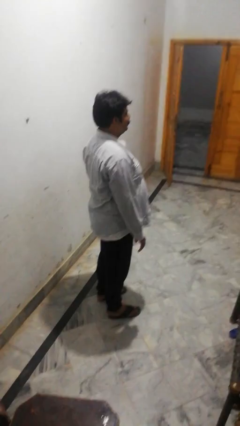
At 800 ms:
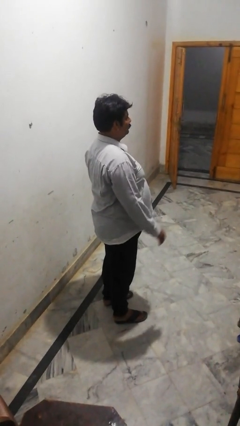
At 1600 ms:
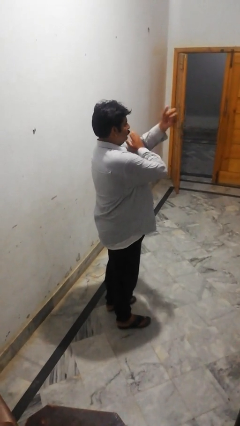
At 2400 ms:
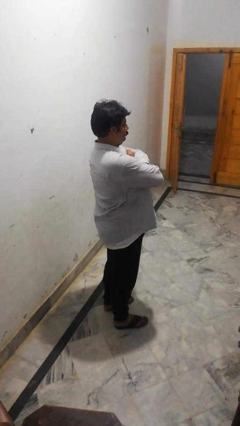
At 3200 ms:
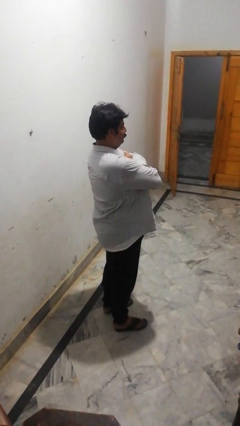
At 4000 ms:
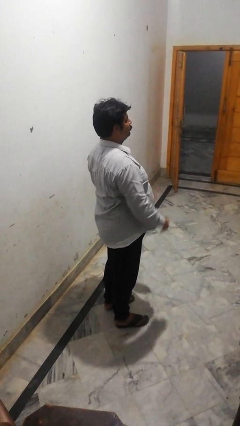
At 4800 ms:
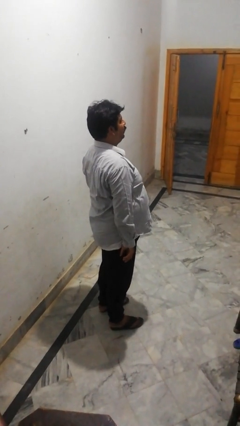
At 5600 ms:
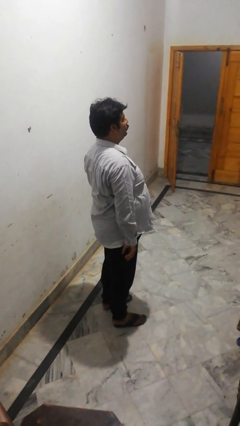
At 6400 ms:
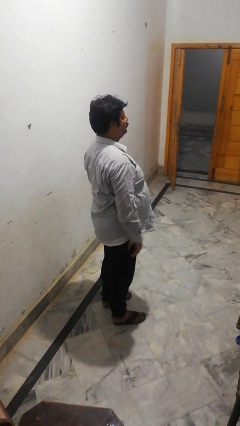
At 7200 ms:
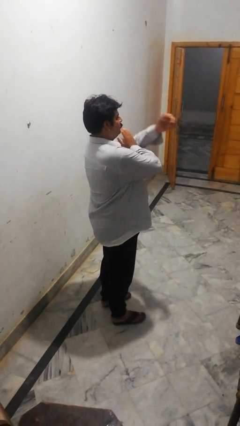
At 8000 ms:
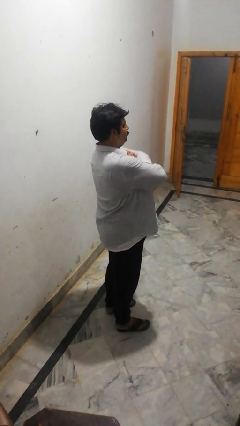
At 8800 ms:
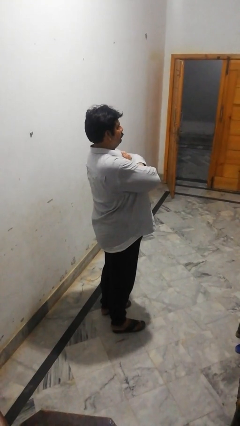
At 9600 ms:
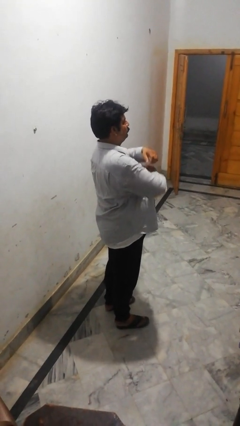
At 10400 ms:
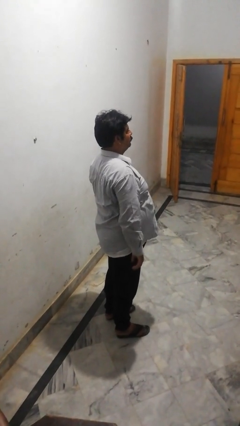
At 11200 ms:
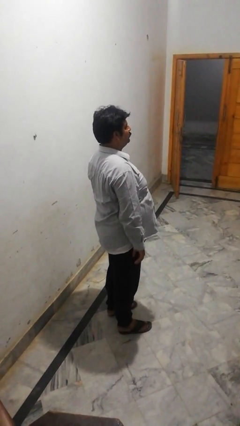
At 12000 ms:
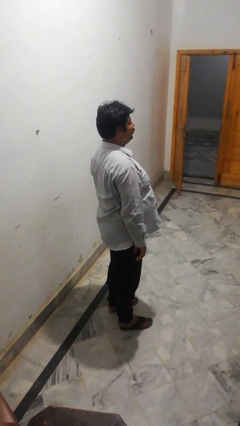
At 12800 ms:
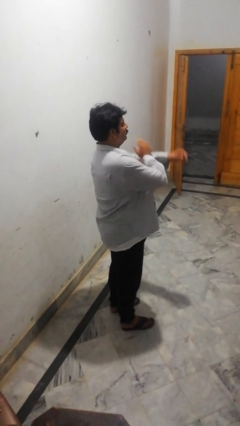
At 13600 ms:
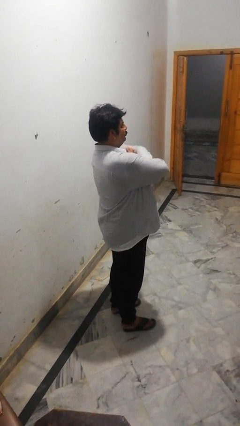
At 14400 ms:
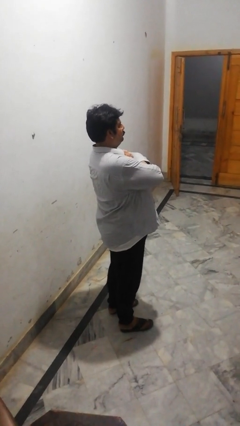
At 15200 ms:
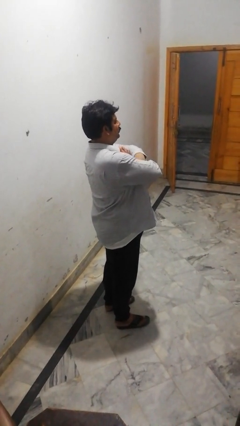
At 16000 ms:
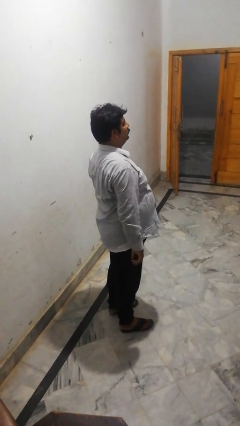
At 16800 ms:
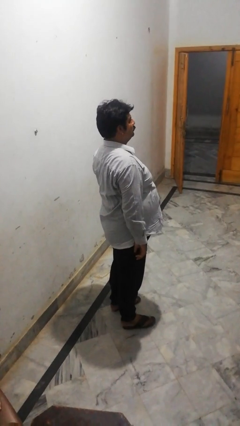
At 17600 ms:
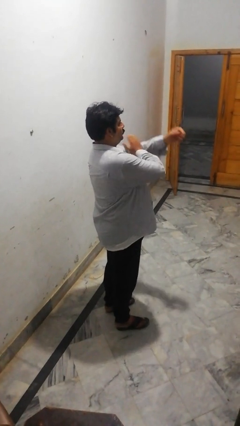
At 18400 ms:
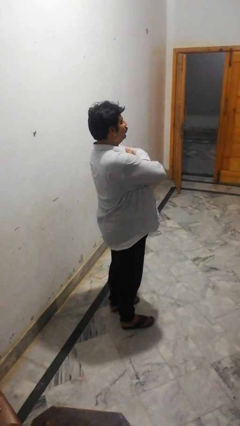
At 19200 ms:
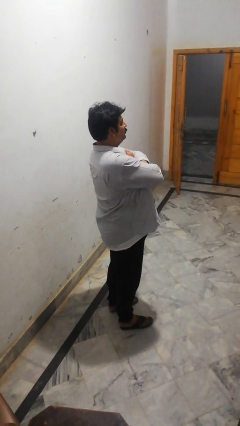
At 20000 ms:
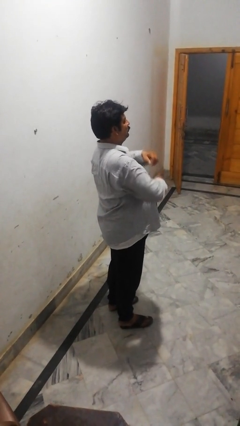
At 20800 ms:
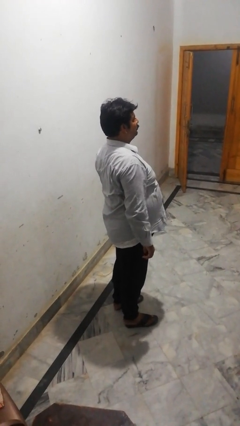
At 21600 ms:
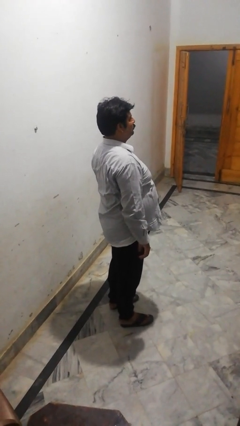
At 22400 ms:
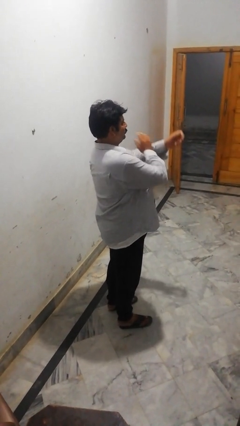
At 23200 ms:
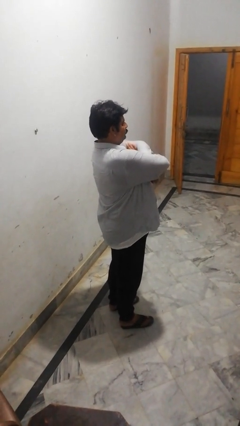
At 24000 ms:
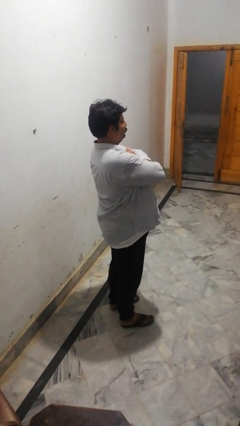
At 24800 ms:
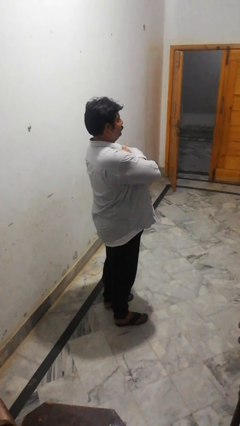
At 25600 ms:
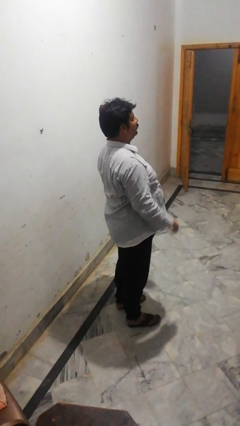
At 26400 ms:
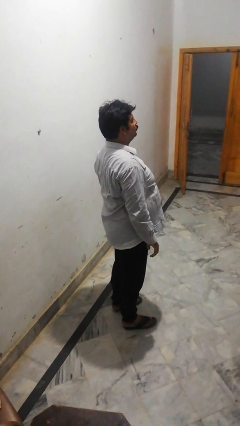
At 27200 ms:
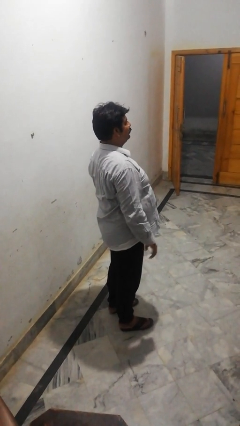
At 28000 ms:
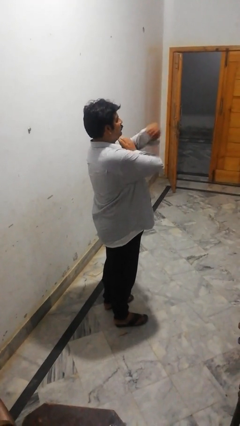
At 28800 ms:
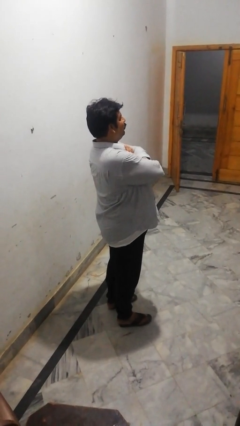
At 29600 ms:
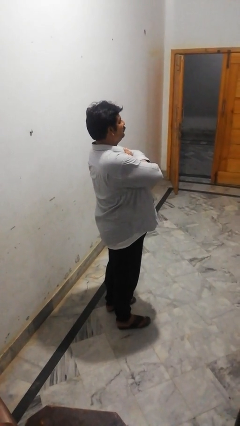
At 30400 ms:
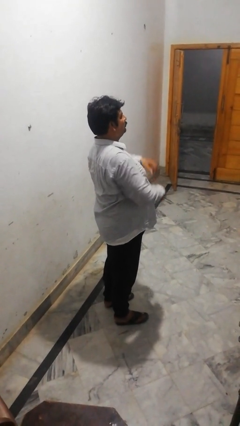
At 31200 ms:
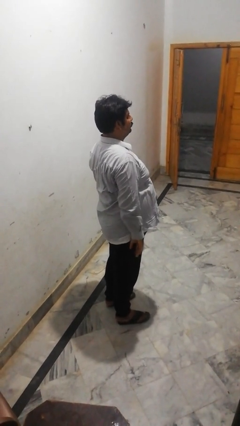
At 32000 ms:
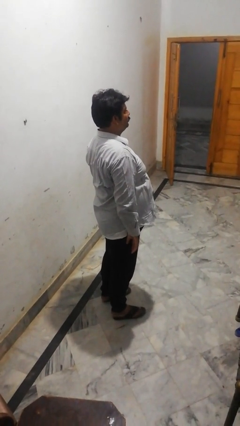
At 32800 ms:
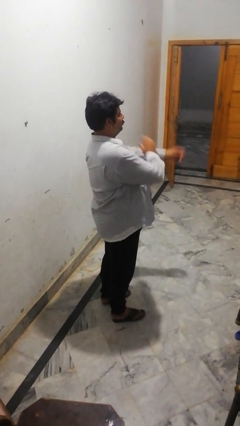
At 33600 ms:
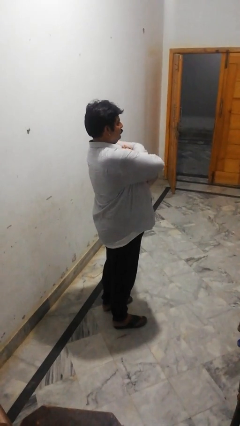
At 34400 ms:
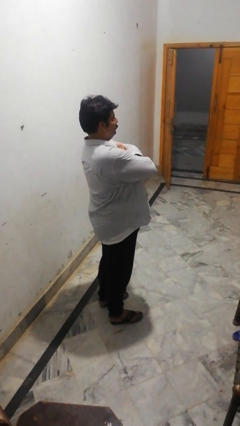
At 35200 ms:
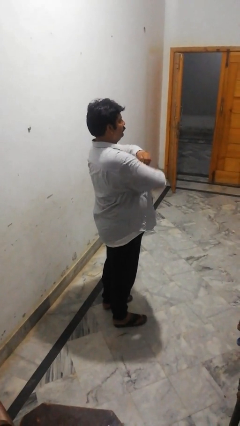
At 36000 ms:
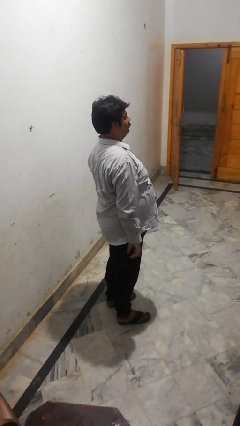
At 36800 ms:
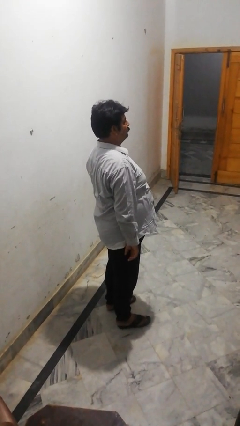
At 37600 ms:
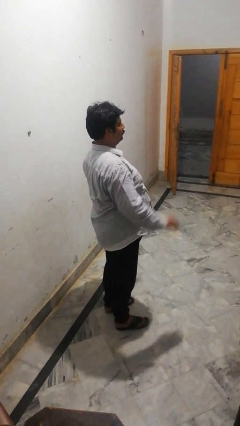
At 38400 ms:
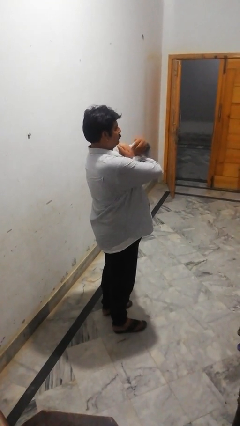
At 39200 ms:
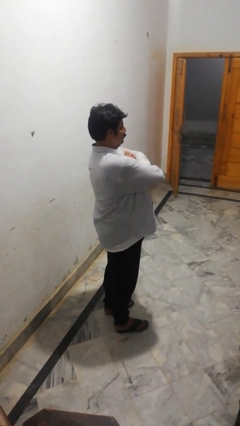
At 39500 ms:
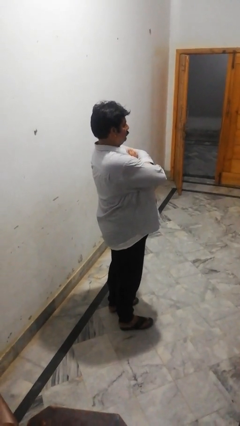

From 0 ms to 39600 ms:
person gestures arms x

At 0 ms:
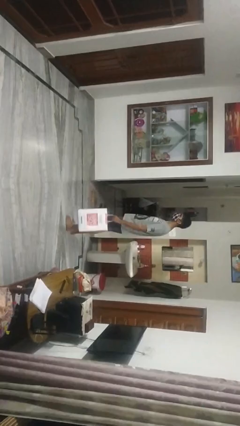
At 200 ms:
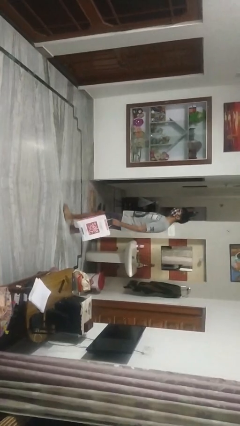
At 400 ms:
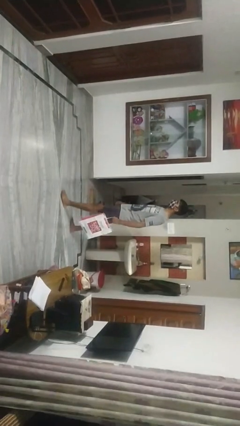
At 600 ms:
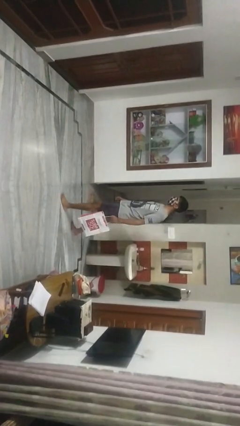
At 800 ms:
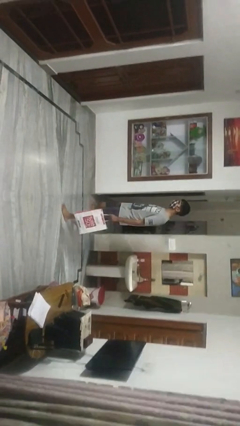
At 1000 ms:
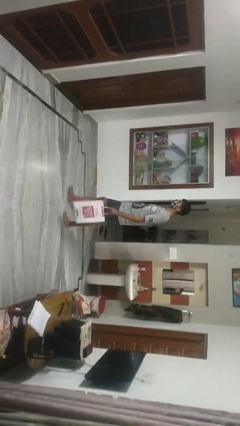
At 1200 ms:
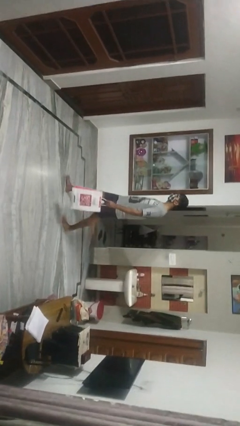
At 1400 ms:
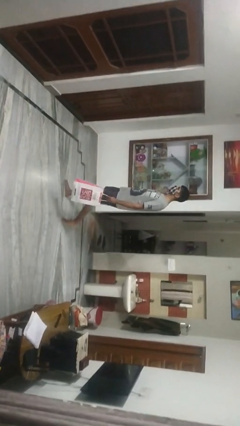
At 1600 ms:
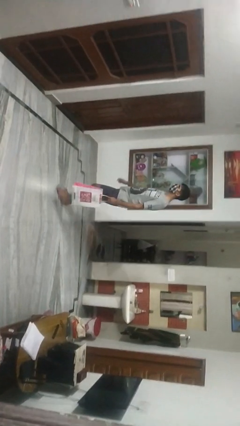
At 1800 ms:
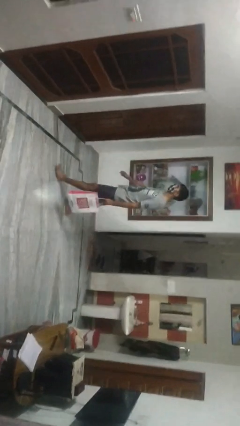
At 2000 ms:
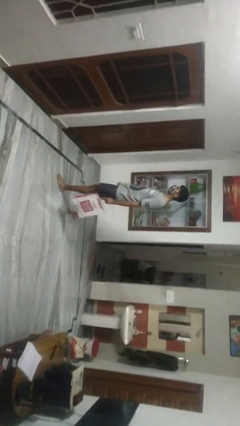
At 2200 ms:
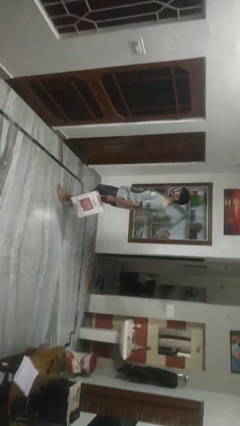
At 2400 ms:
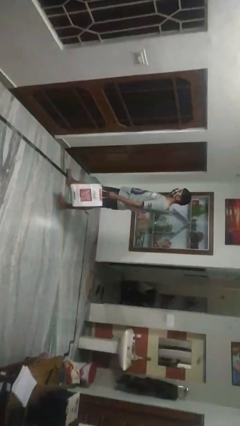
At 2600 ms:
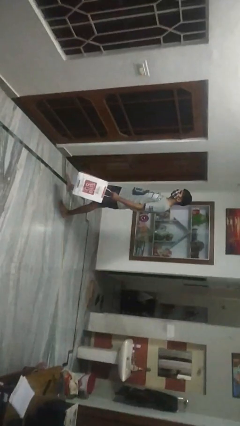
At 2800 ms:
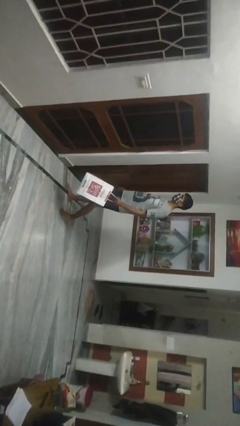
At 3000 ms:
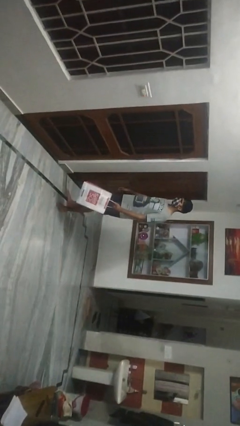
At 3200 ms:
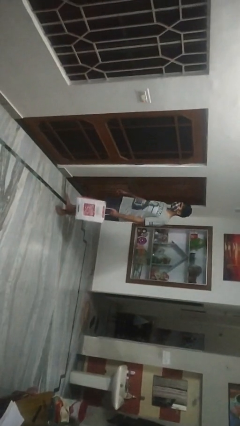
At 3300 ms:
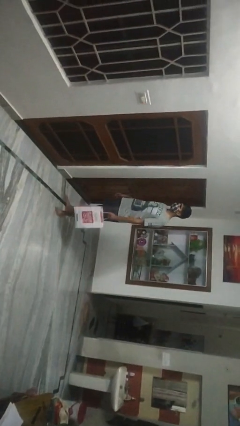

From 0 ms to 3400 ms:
person carries groceries

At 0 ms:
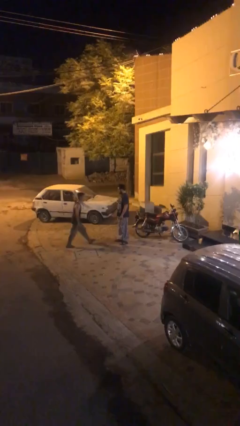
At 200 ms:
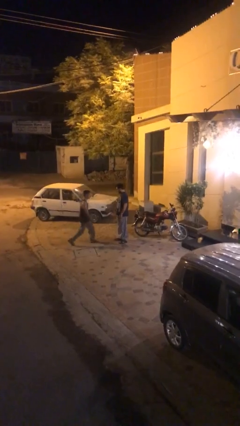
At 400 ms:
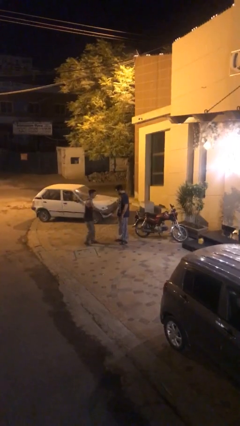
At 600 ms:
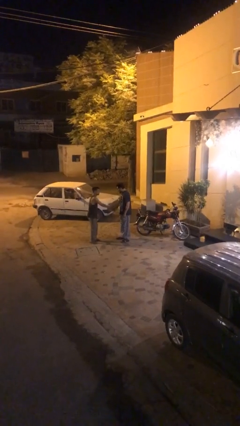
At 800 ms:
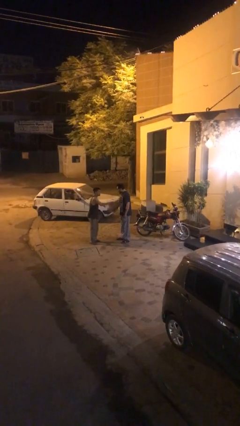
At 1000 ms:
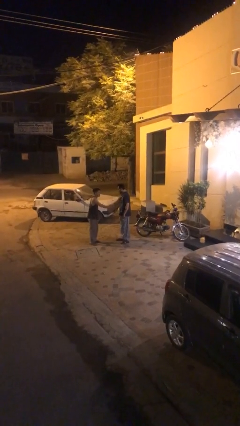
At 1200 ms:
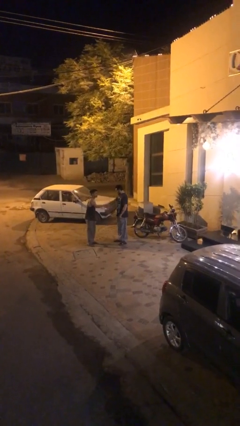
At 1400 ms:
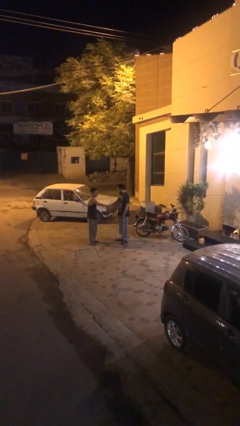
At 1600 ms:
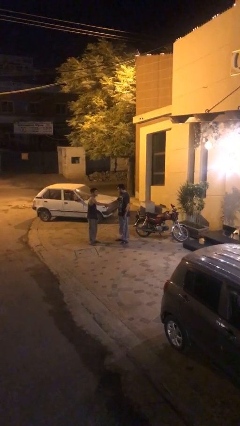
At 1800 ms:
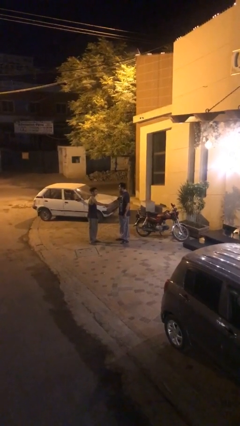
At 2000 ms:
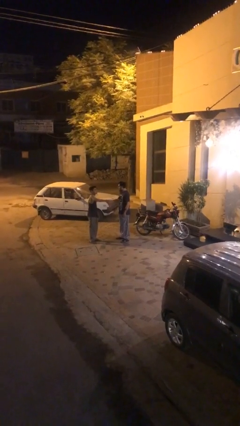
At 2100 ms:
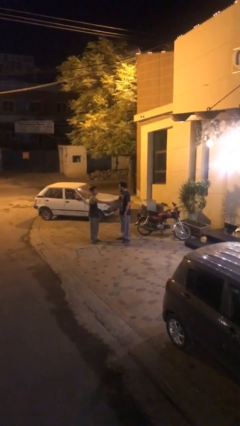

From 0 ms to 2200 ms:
person shakes hand

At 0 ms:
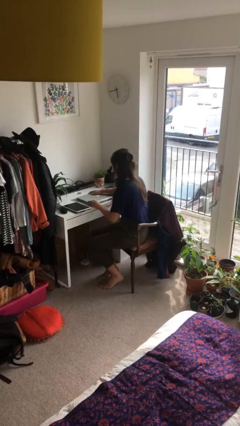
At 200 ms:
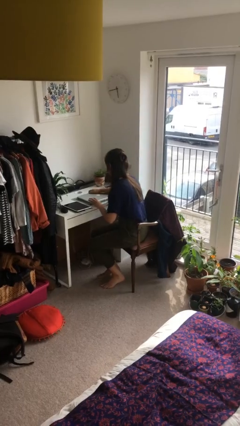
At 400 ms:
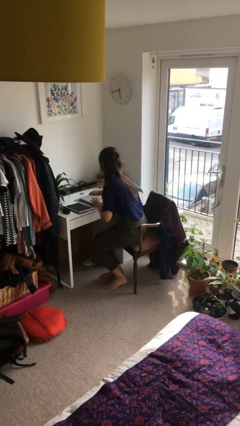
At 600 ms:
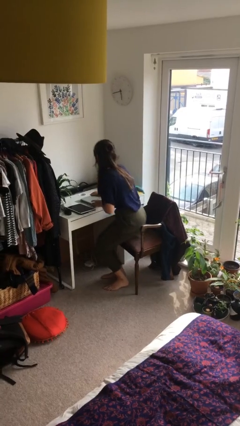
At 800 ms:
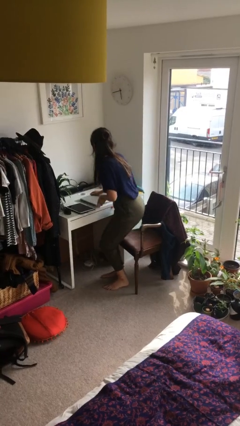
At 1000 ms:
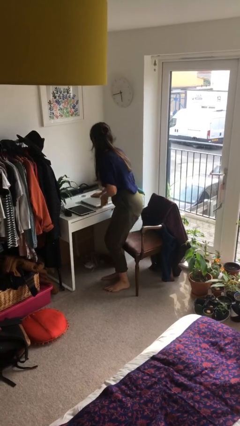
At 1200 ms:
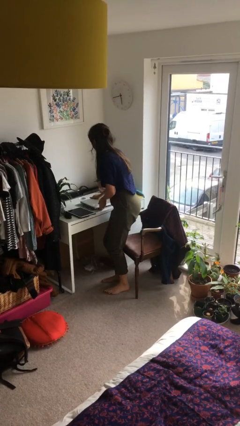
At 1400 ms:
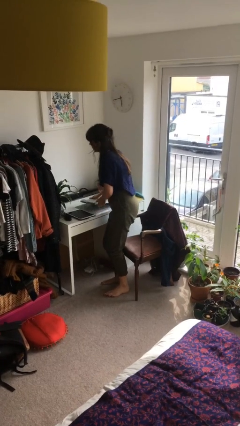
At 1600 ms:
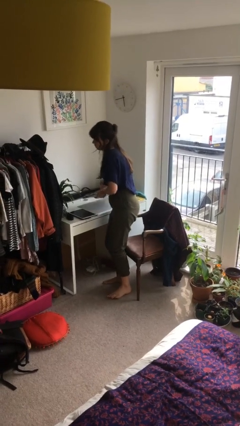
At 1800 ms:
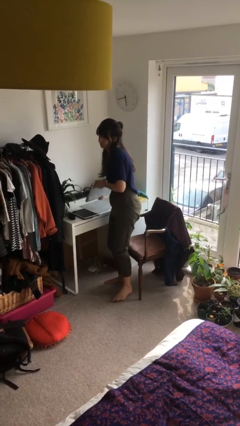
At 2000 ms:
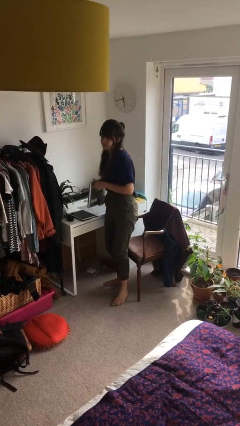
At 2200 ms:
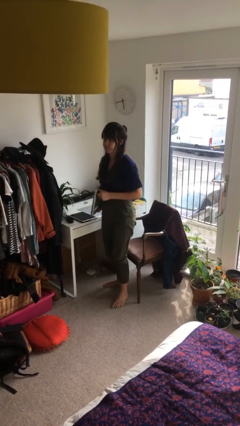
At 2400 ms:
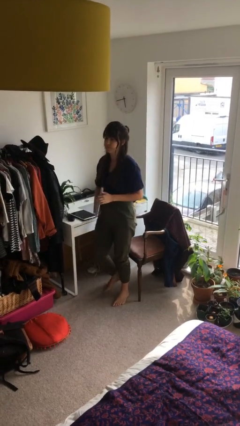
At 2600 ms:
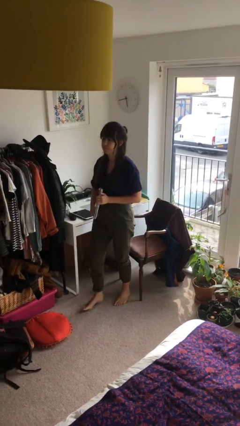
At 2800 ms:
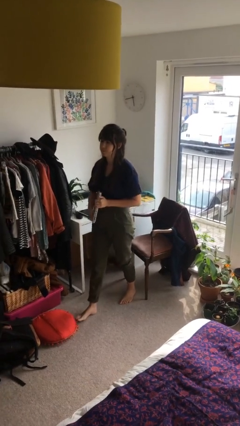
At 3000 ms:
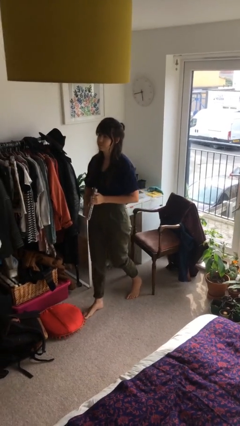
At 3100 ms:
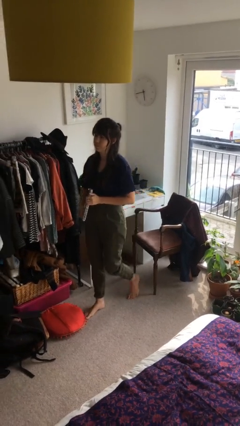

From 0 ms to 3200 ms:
person stands up
